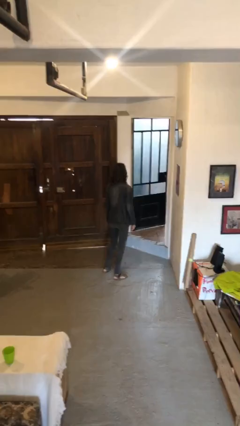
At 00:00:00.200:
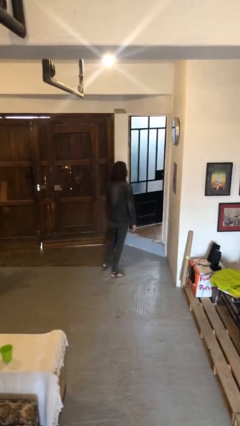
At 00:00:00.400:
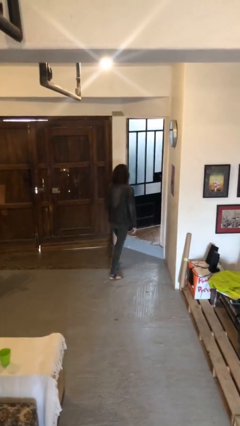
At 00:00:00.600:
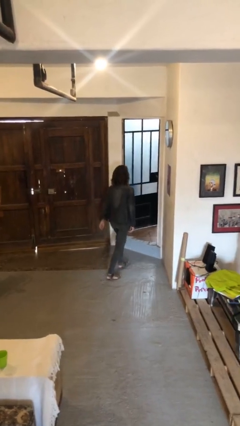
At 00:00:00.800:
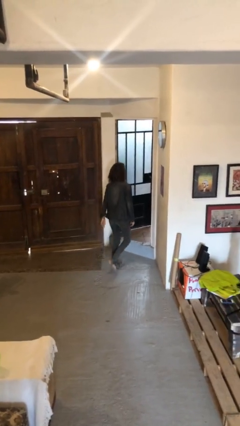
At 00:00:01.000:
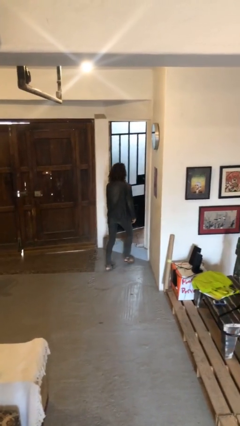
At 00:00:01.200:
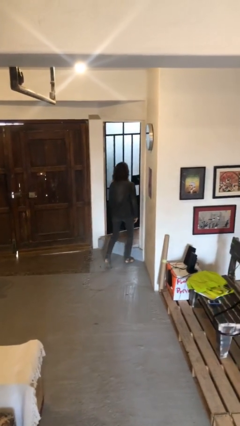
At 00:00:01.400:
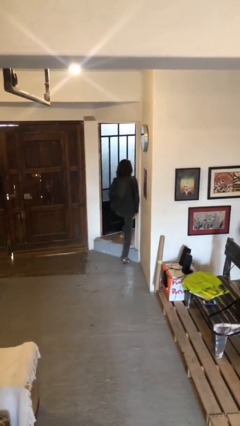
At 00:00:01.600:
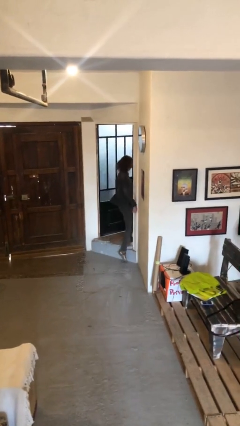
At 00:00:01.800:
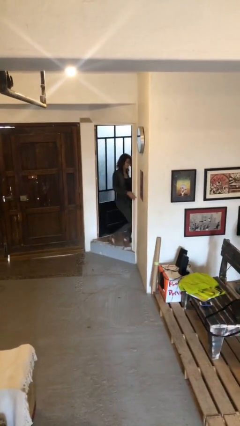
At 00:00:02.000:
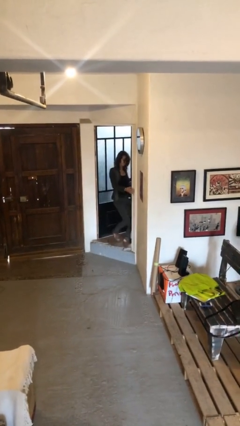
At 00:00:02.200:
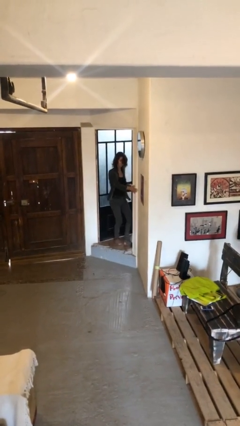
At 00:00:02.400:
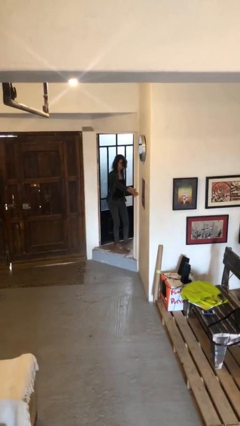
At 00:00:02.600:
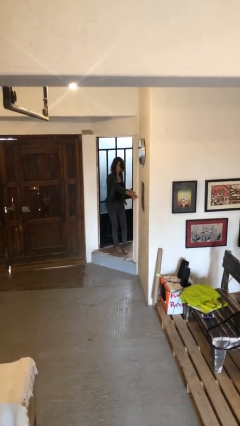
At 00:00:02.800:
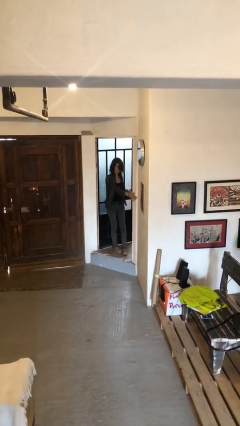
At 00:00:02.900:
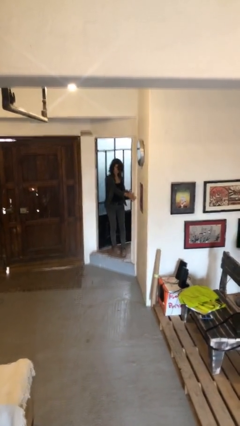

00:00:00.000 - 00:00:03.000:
person bumps into wall

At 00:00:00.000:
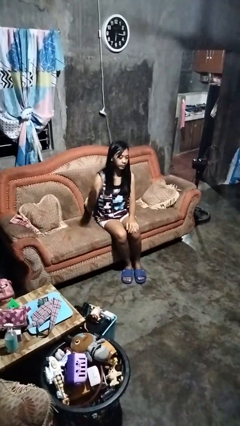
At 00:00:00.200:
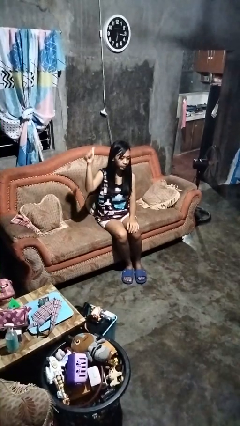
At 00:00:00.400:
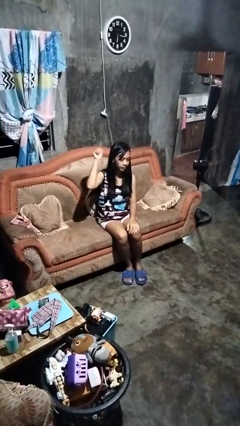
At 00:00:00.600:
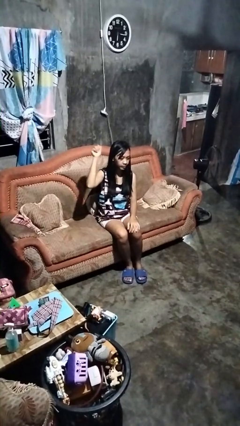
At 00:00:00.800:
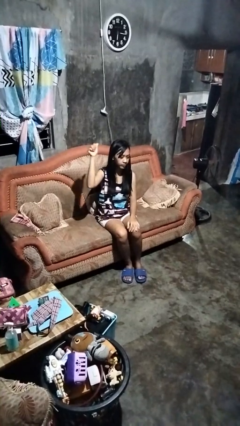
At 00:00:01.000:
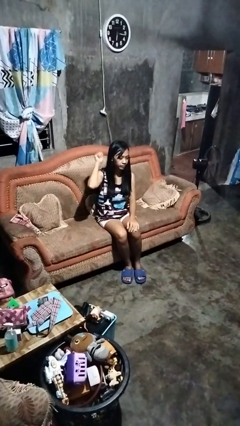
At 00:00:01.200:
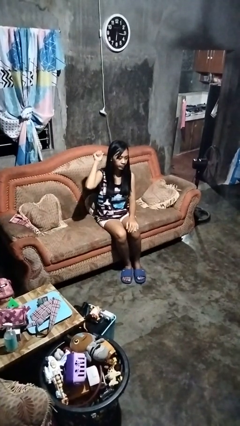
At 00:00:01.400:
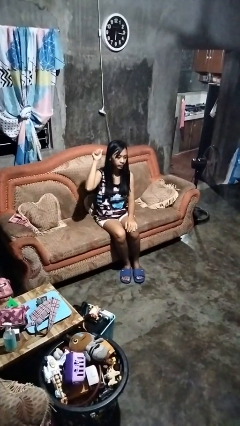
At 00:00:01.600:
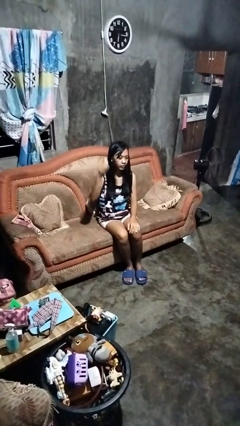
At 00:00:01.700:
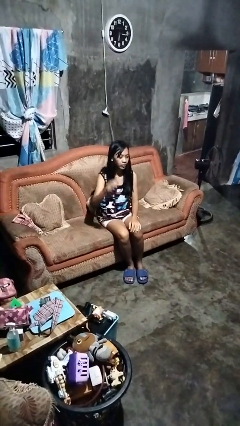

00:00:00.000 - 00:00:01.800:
person gestures behind me

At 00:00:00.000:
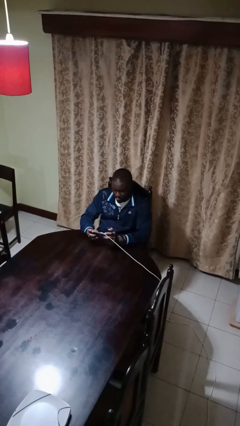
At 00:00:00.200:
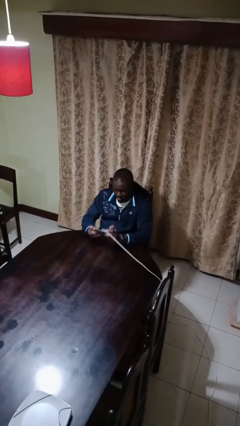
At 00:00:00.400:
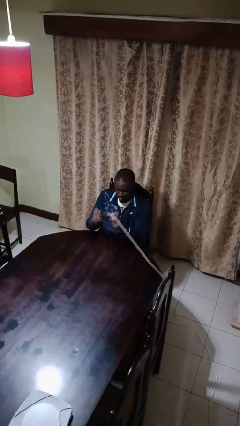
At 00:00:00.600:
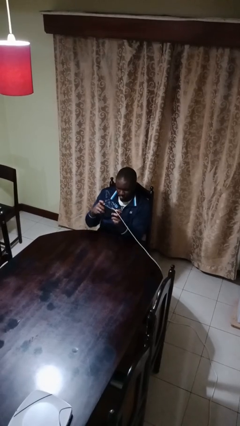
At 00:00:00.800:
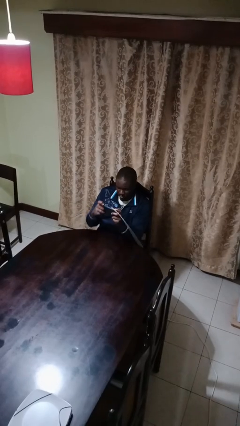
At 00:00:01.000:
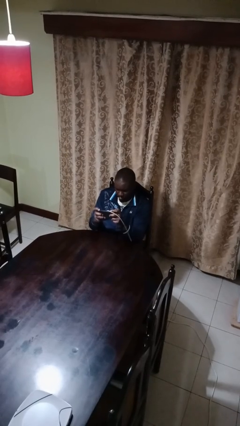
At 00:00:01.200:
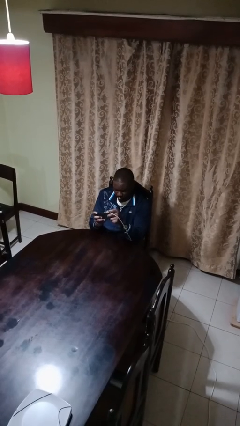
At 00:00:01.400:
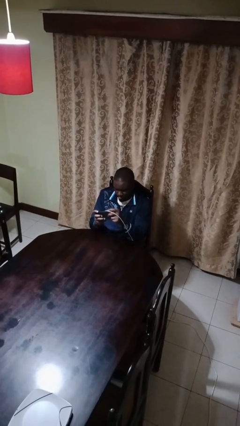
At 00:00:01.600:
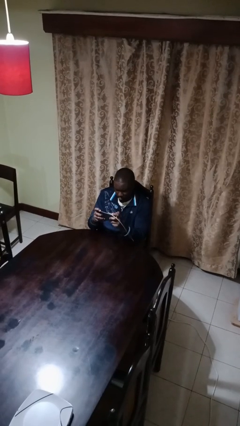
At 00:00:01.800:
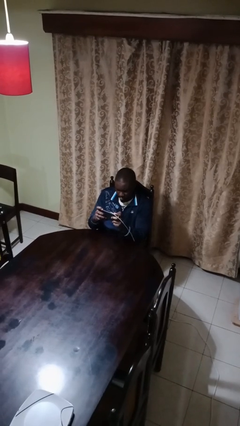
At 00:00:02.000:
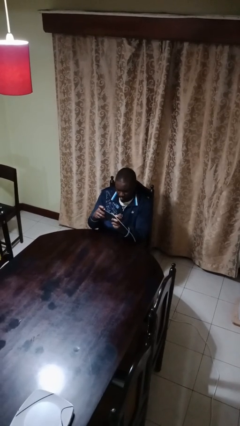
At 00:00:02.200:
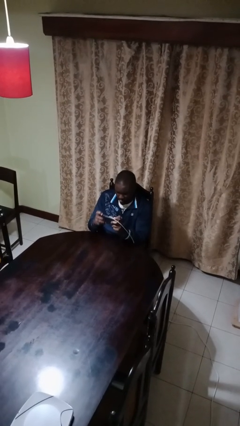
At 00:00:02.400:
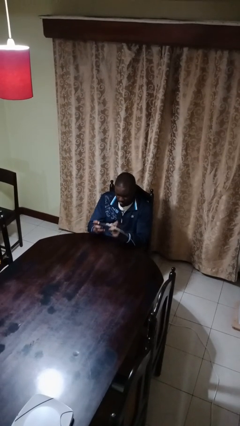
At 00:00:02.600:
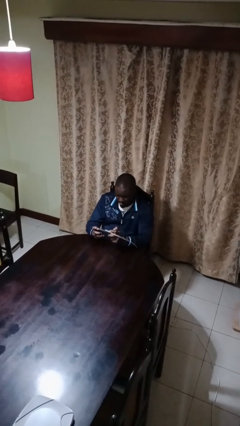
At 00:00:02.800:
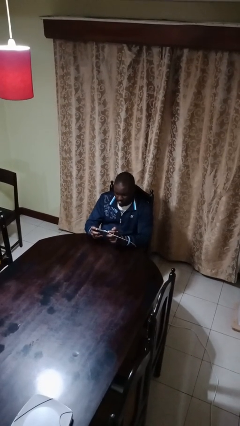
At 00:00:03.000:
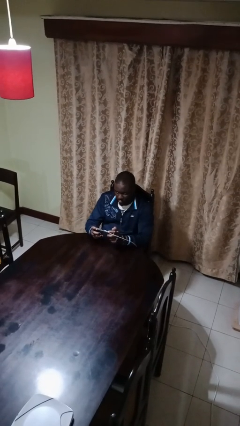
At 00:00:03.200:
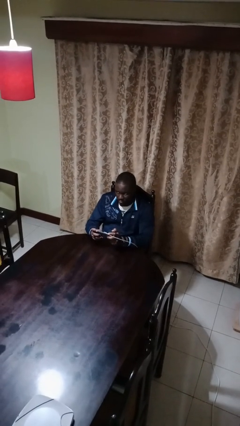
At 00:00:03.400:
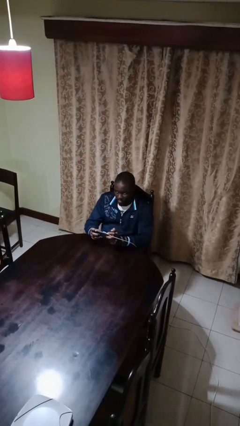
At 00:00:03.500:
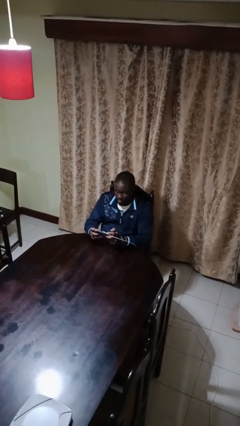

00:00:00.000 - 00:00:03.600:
person interacts with handheld game

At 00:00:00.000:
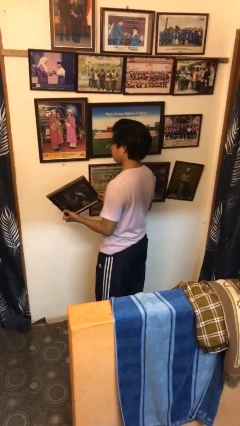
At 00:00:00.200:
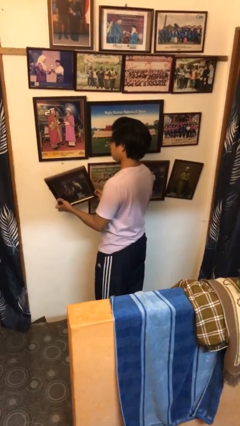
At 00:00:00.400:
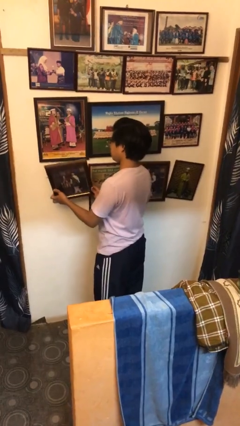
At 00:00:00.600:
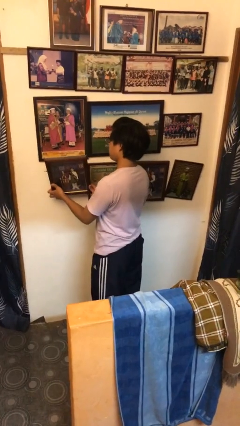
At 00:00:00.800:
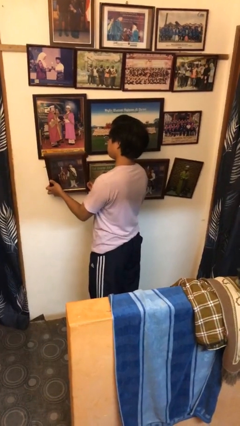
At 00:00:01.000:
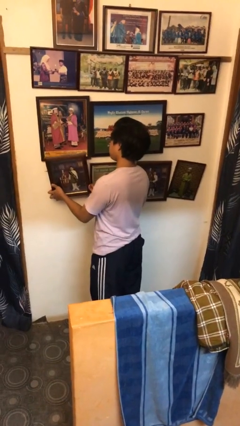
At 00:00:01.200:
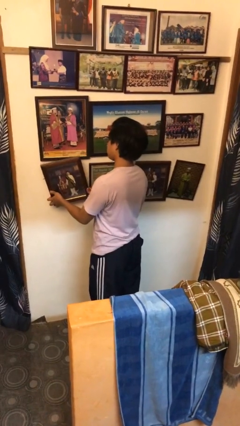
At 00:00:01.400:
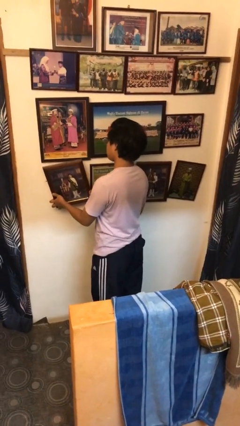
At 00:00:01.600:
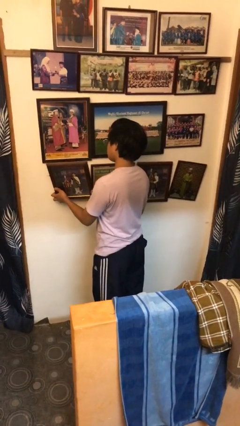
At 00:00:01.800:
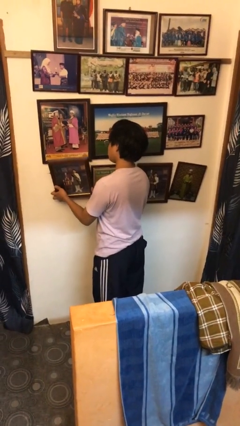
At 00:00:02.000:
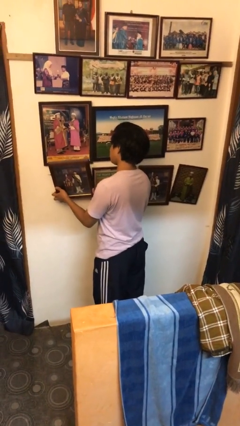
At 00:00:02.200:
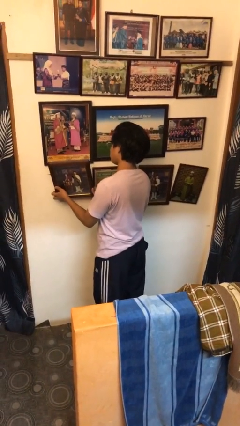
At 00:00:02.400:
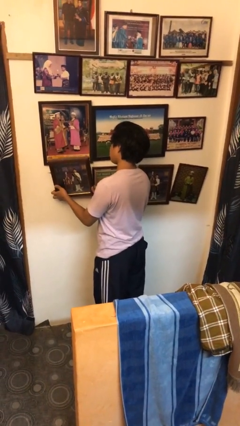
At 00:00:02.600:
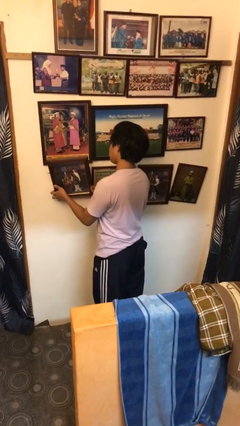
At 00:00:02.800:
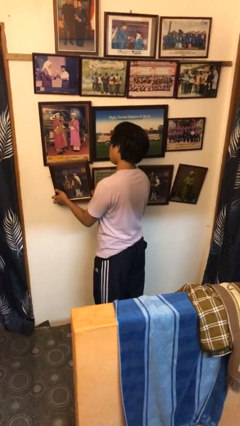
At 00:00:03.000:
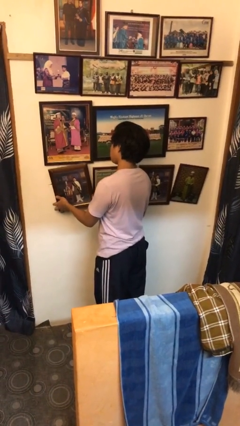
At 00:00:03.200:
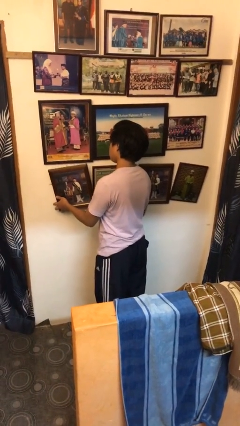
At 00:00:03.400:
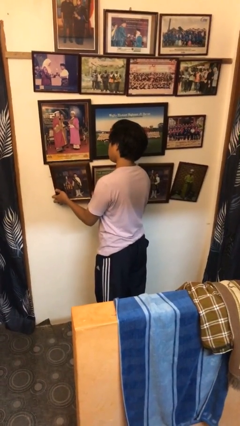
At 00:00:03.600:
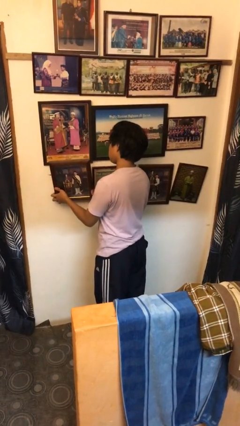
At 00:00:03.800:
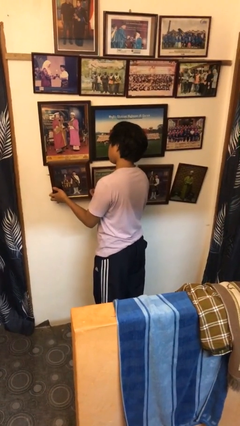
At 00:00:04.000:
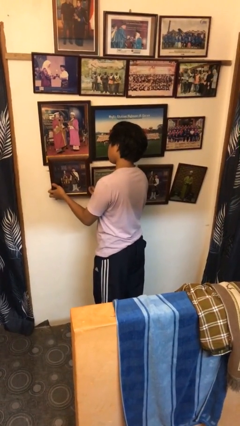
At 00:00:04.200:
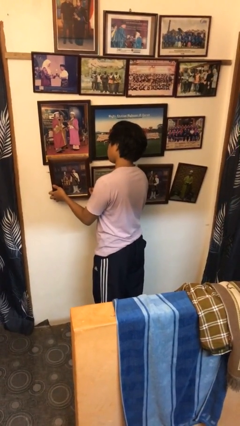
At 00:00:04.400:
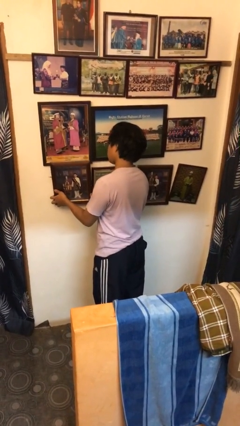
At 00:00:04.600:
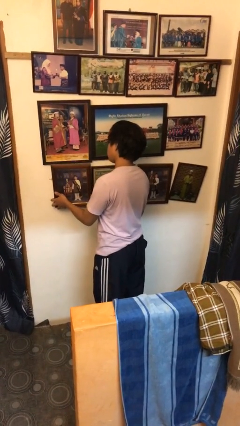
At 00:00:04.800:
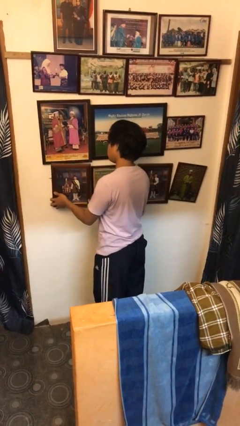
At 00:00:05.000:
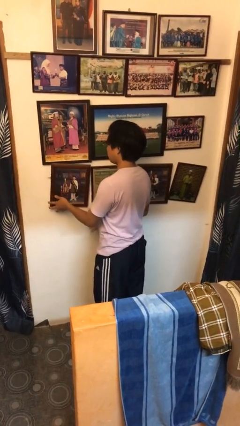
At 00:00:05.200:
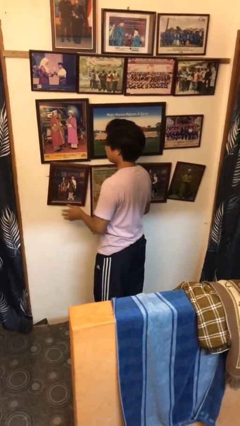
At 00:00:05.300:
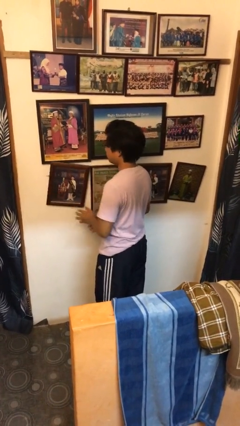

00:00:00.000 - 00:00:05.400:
person puts up picture frame

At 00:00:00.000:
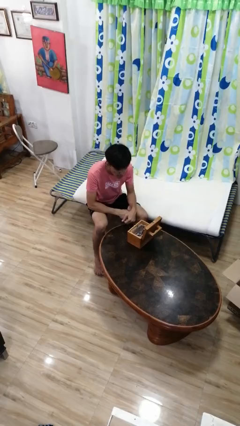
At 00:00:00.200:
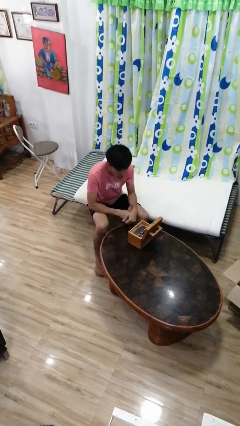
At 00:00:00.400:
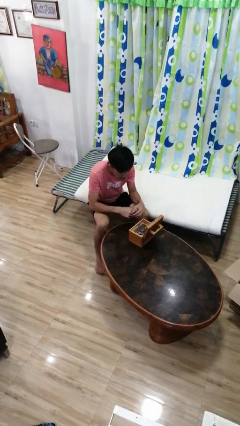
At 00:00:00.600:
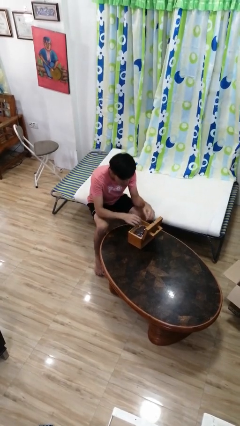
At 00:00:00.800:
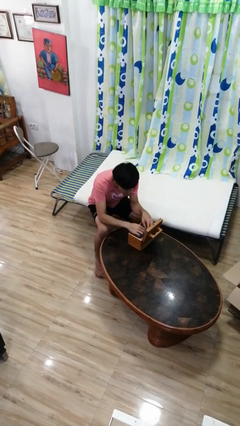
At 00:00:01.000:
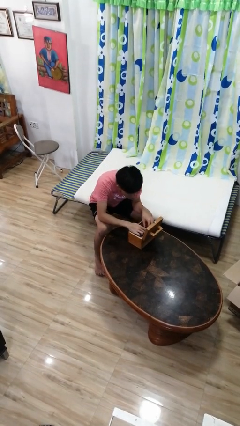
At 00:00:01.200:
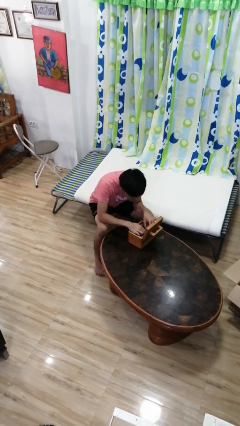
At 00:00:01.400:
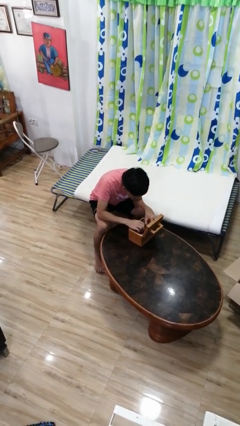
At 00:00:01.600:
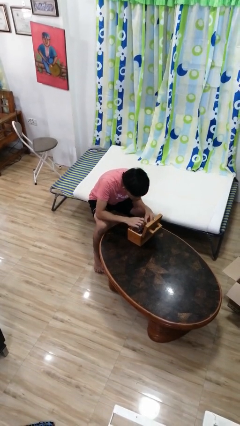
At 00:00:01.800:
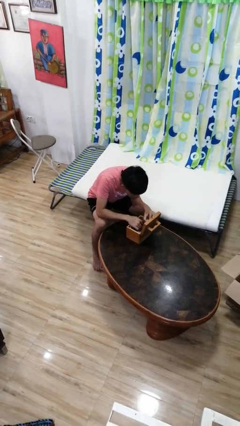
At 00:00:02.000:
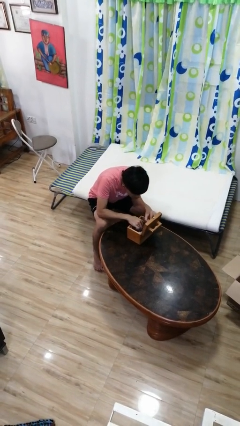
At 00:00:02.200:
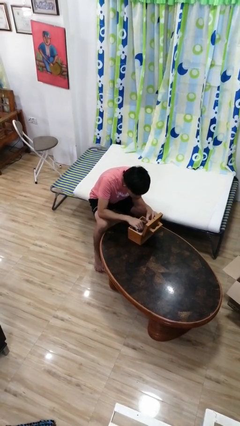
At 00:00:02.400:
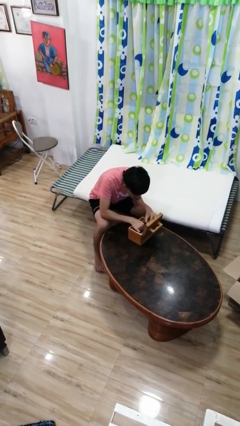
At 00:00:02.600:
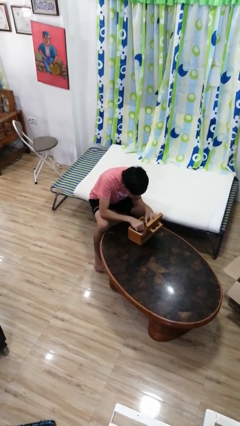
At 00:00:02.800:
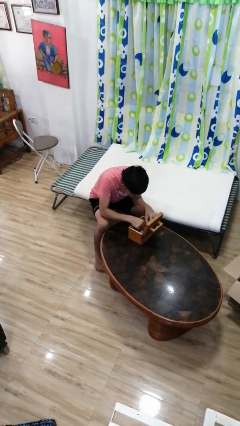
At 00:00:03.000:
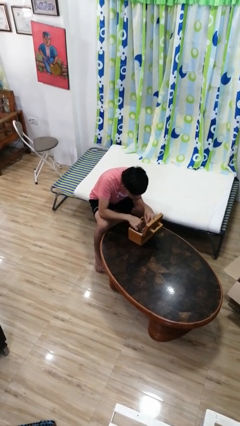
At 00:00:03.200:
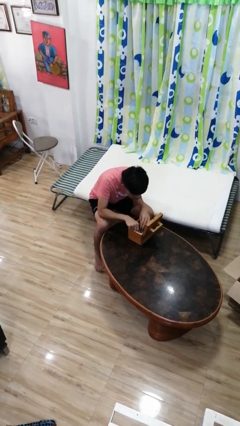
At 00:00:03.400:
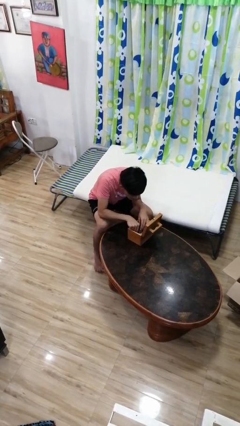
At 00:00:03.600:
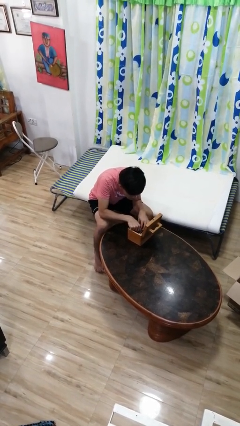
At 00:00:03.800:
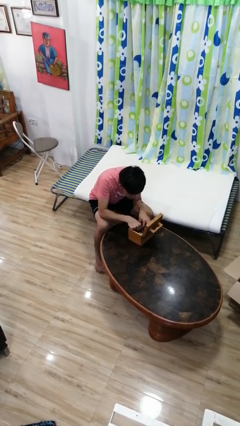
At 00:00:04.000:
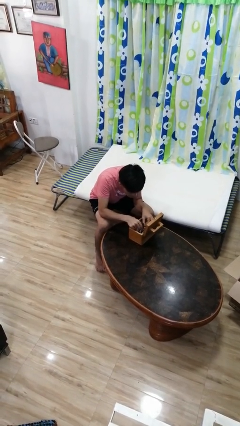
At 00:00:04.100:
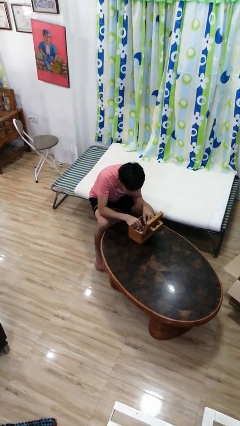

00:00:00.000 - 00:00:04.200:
person searches jewelry box
